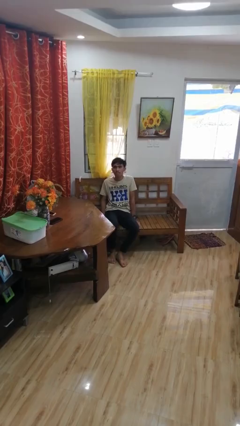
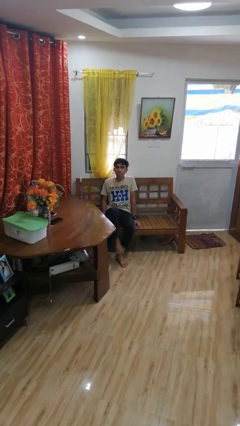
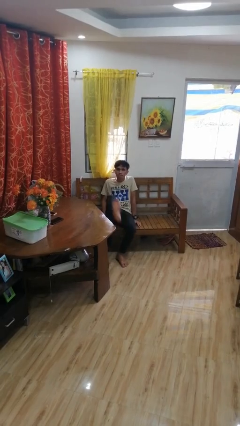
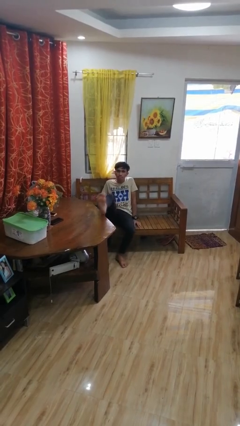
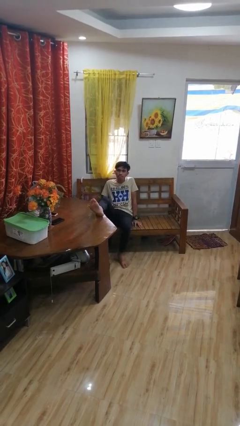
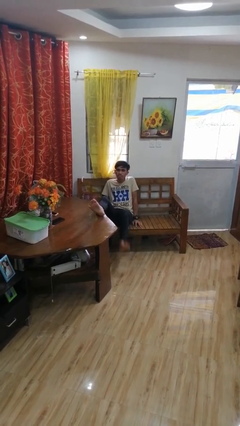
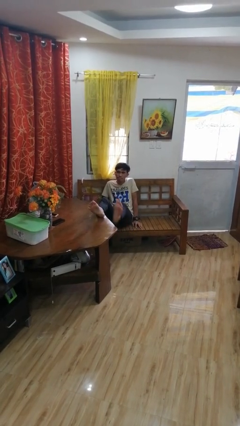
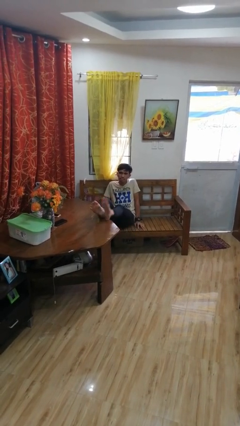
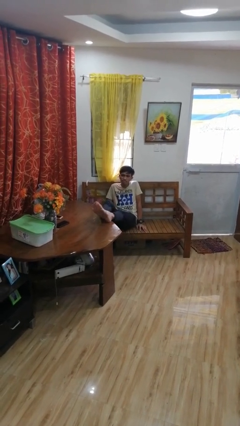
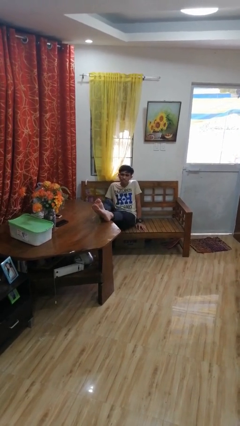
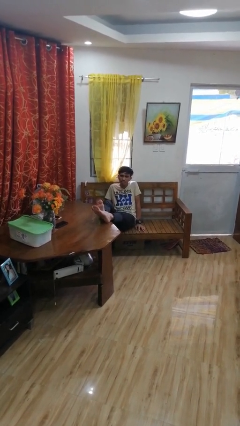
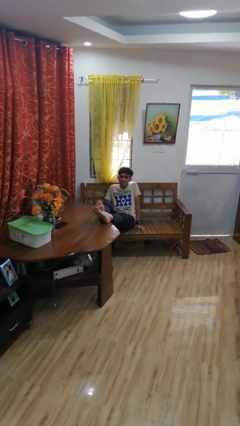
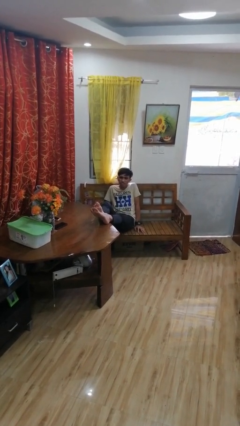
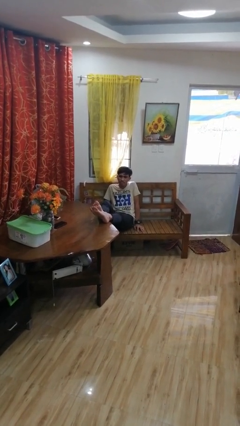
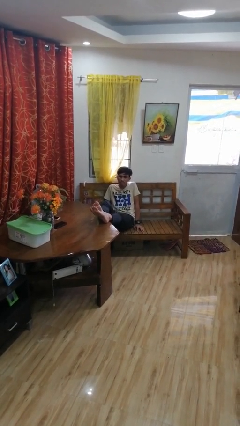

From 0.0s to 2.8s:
person puts feet up

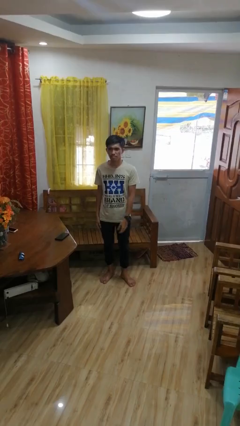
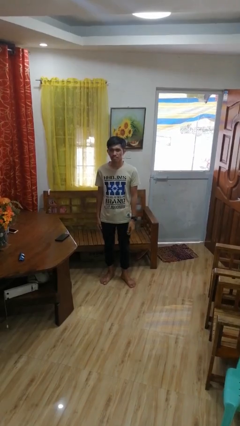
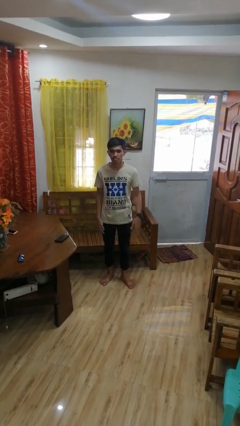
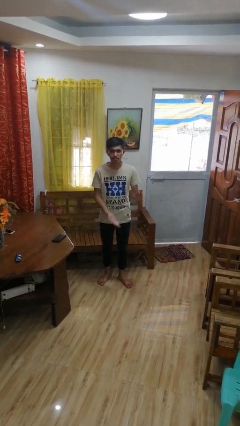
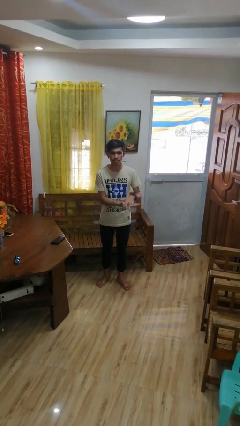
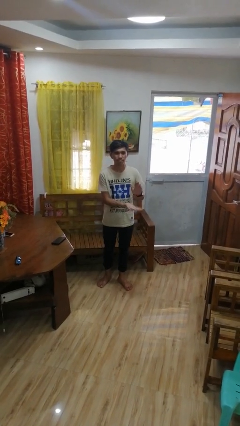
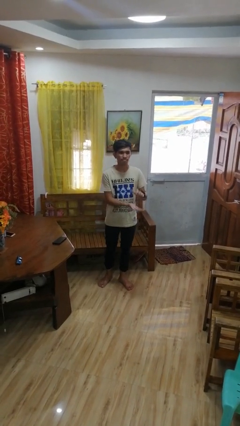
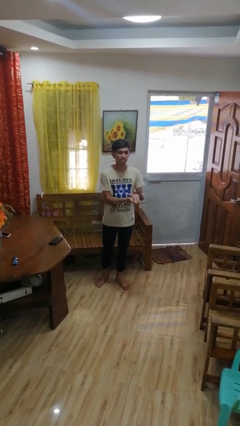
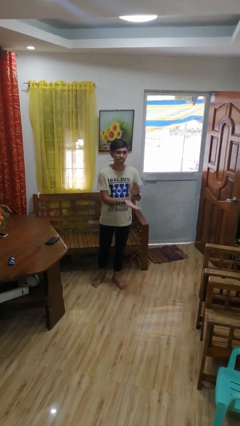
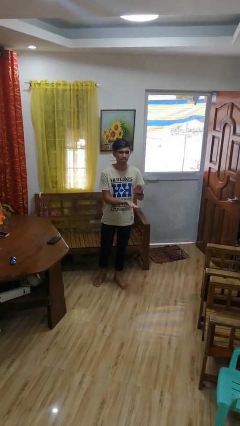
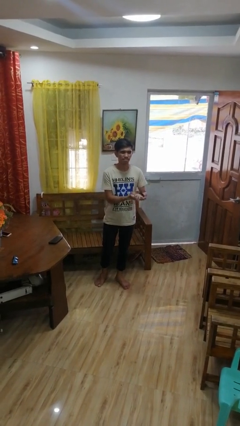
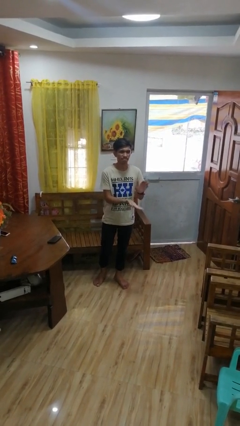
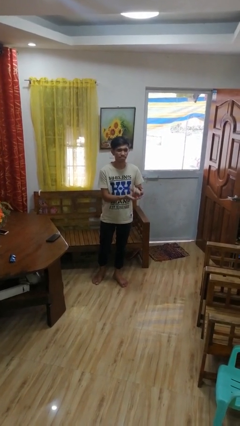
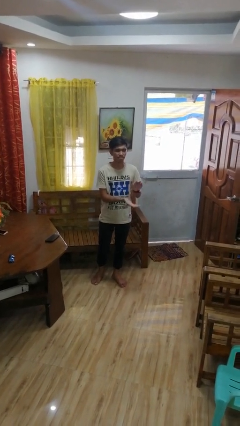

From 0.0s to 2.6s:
person claps hands

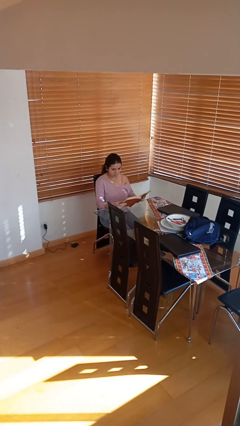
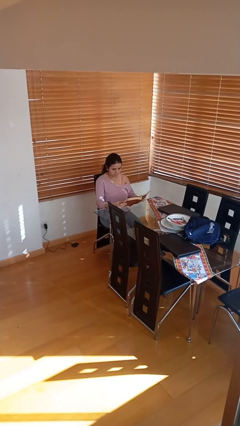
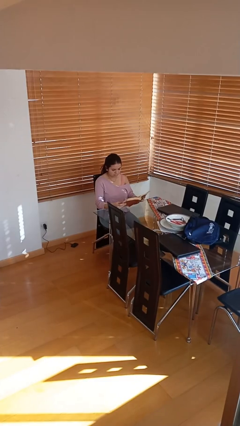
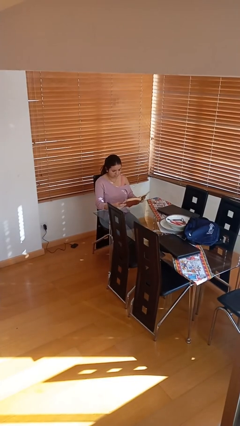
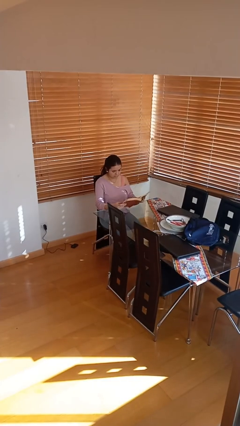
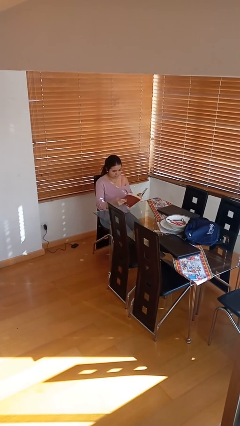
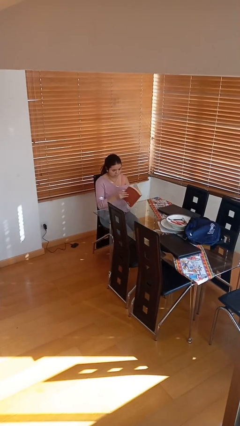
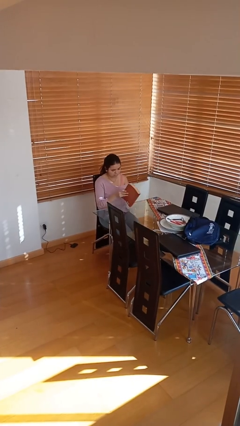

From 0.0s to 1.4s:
person reads document

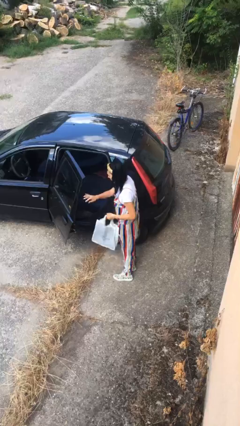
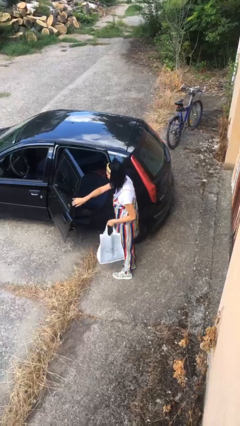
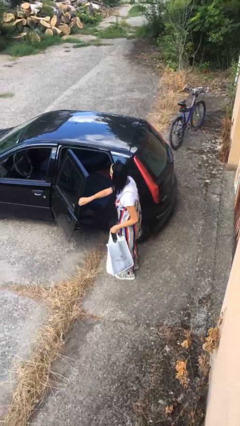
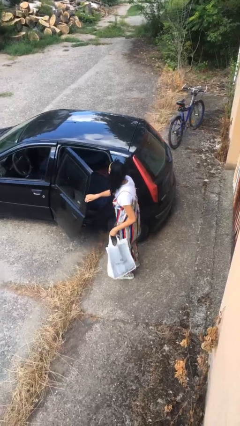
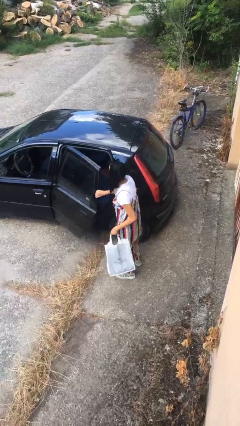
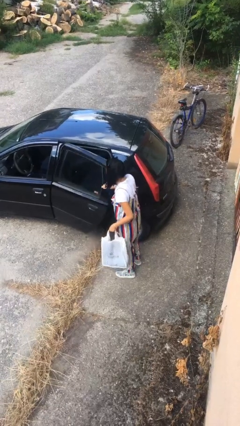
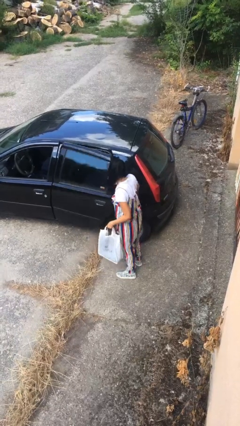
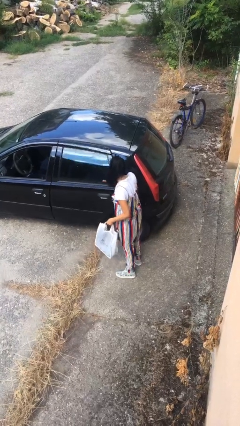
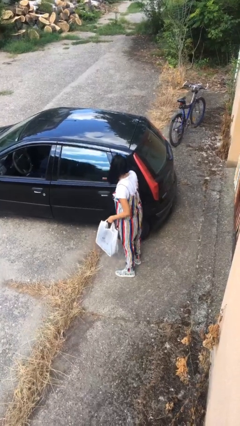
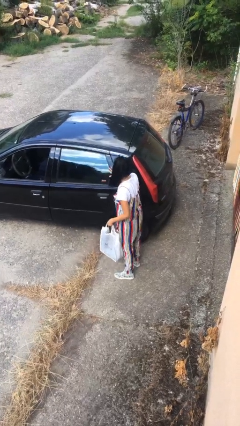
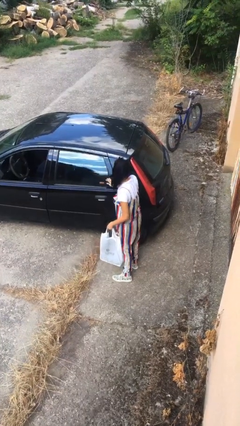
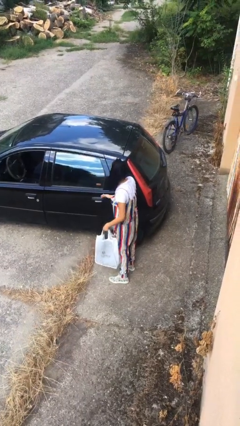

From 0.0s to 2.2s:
person closes car door

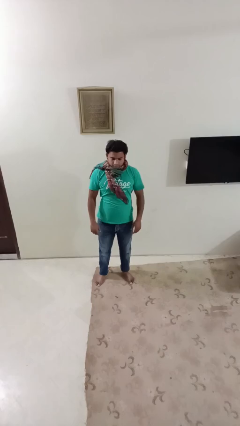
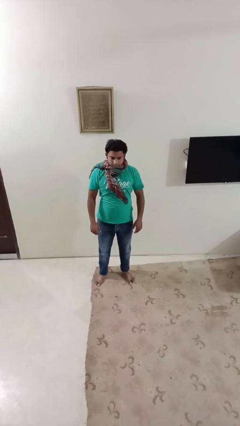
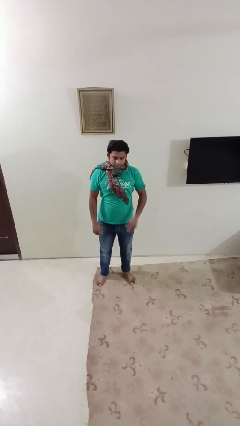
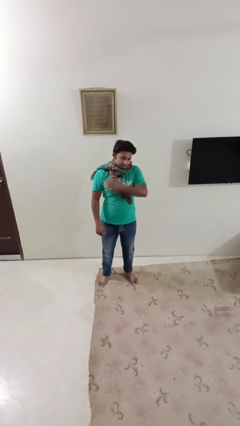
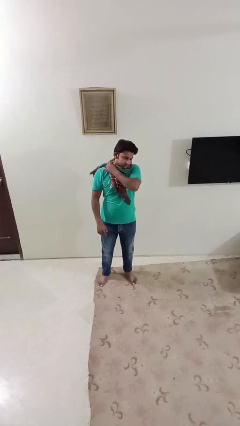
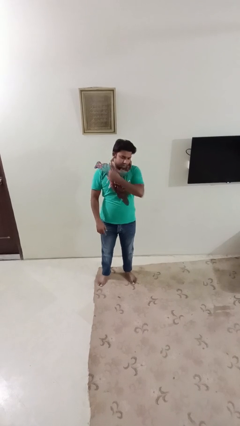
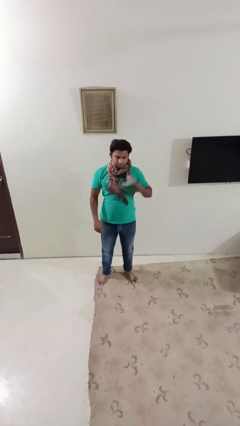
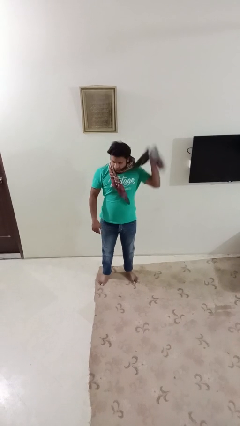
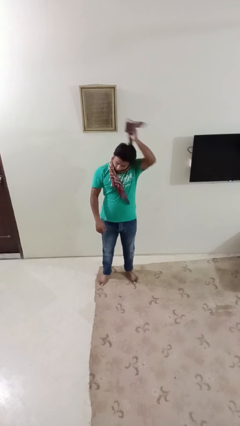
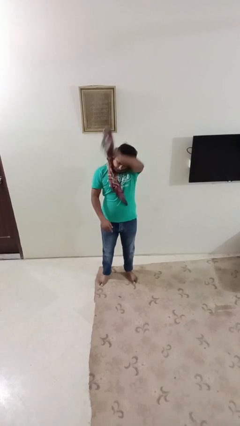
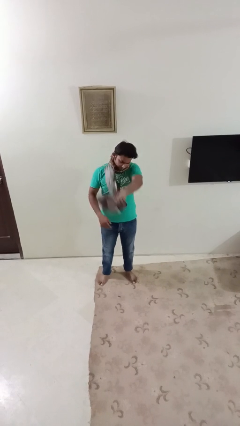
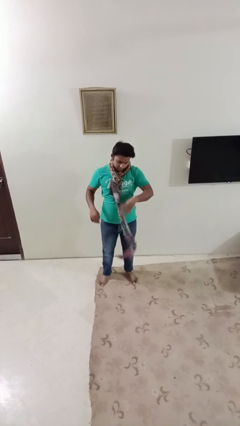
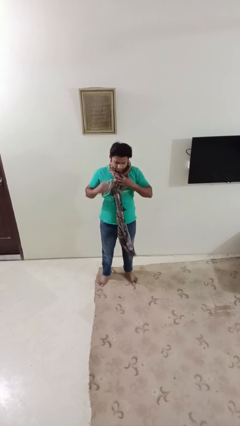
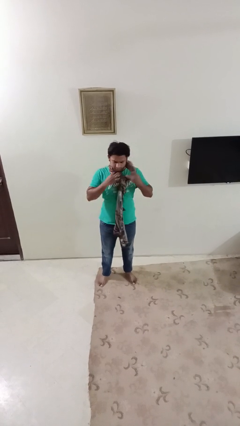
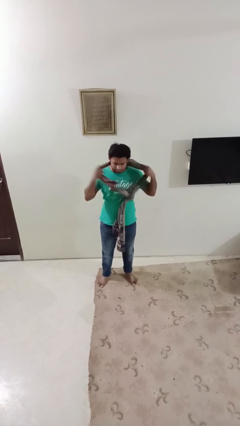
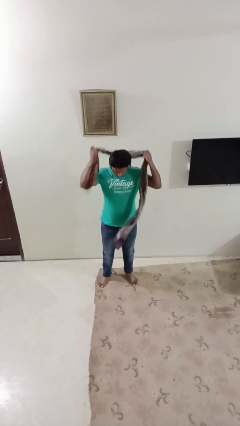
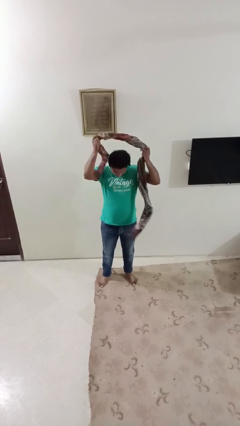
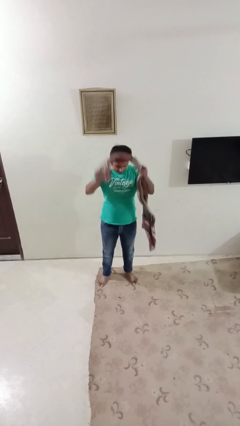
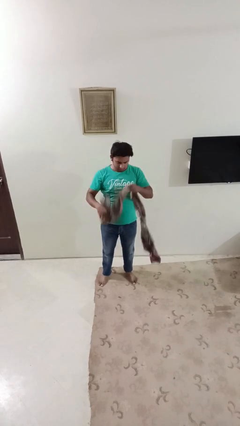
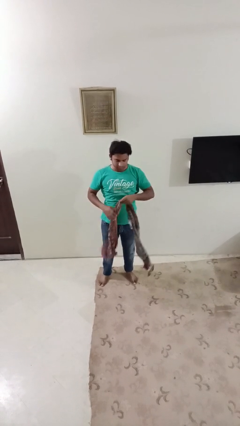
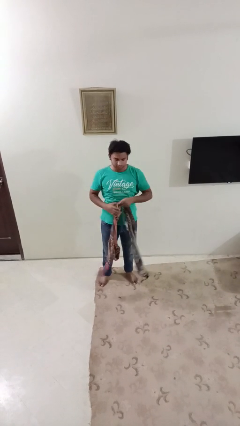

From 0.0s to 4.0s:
person takes off scarf

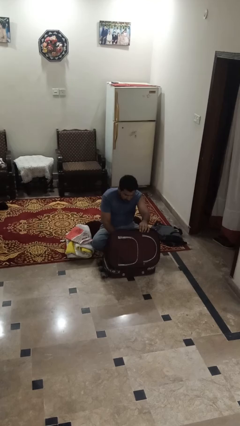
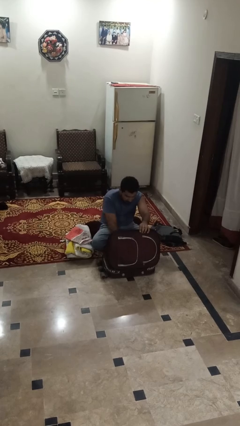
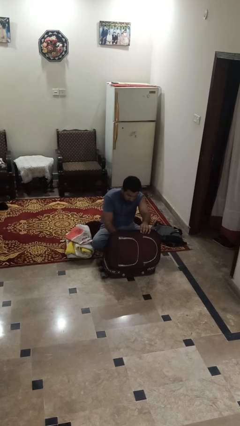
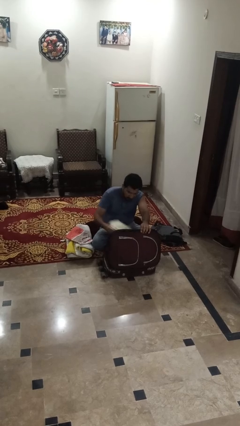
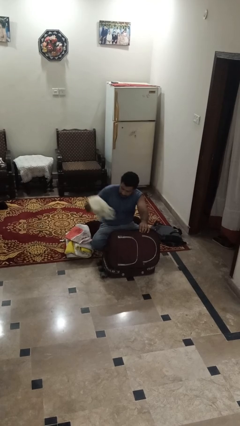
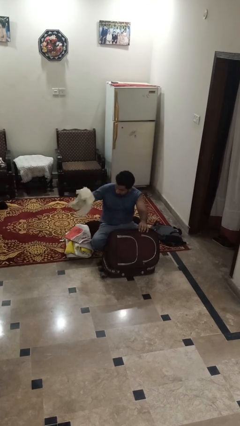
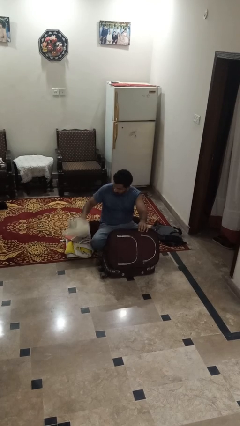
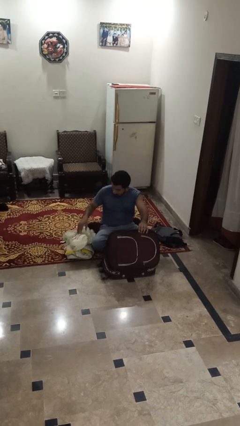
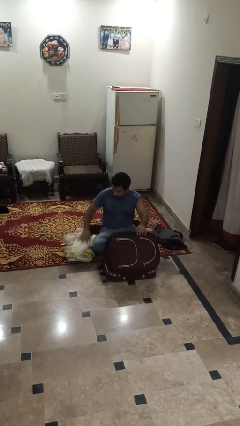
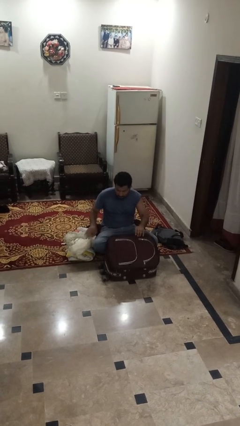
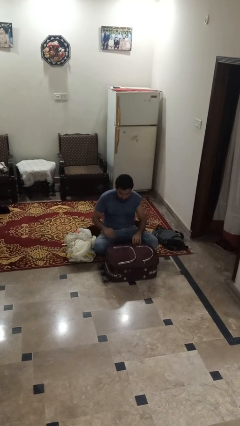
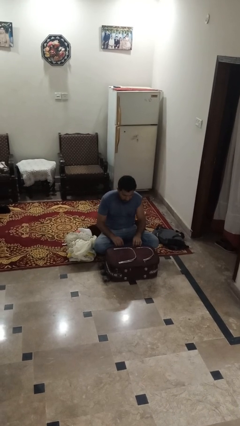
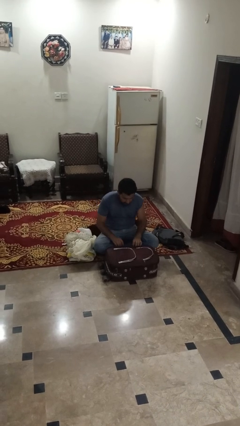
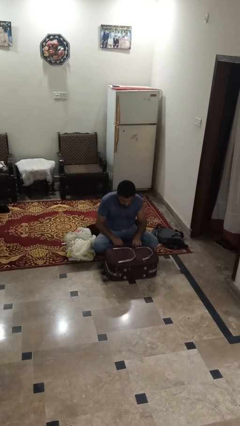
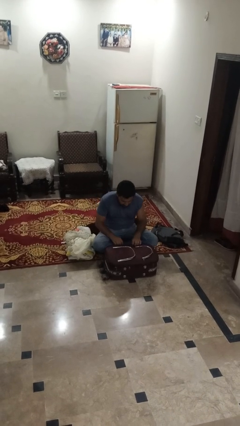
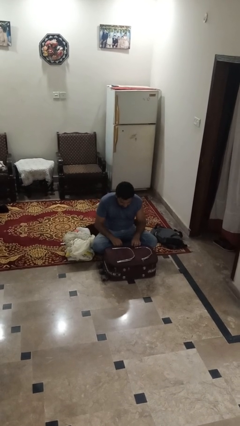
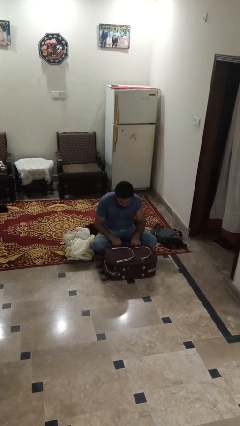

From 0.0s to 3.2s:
person unloads clothes from suitcase

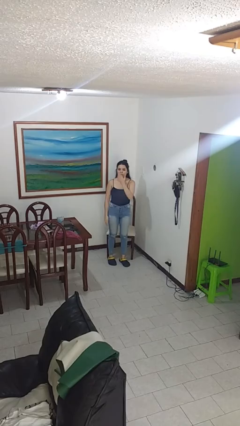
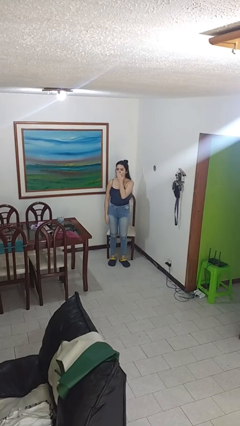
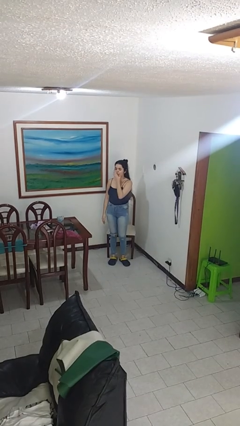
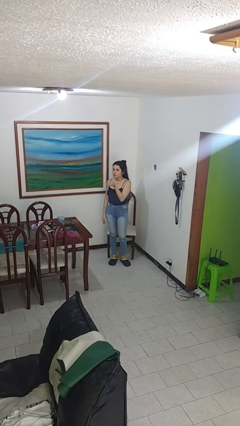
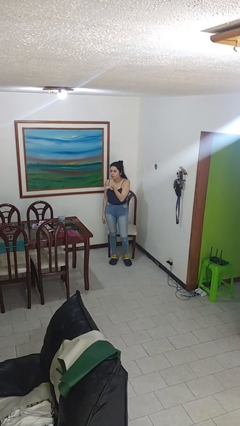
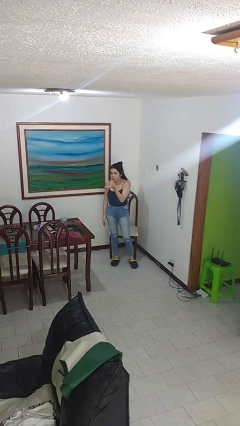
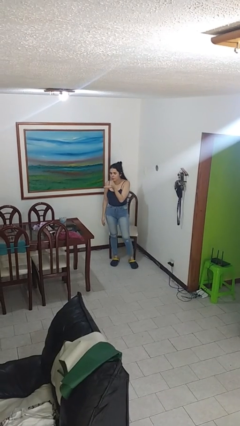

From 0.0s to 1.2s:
person gestures blow kiss
